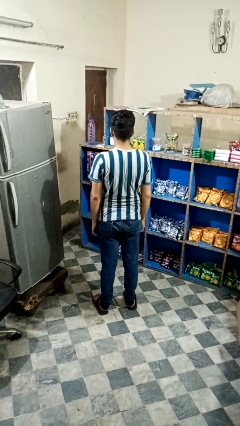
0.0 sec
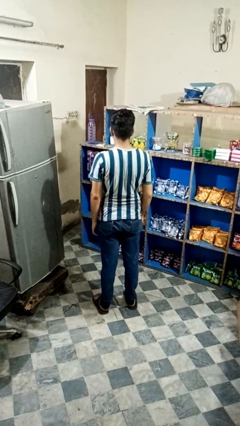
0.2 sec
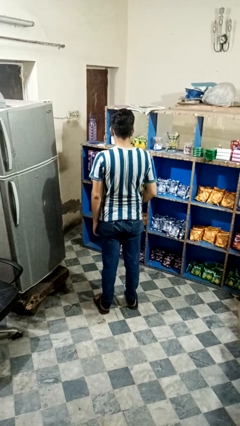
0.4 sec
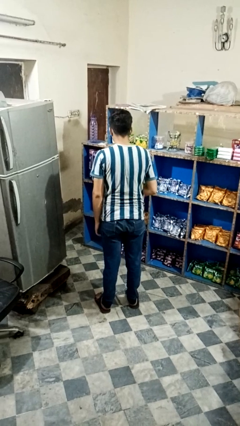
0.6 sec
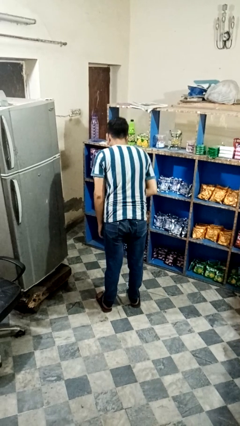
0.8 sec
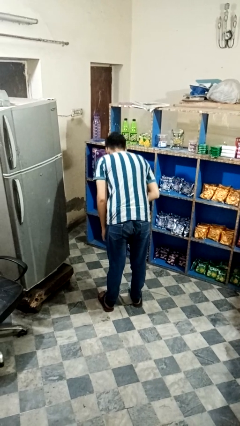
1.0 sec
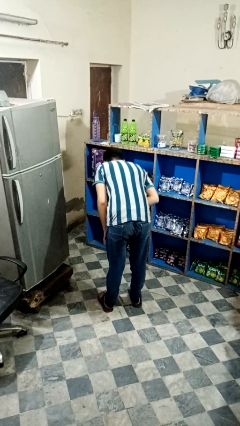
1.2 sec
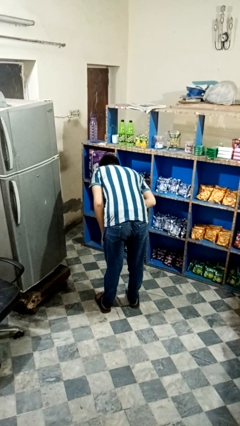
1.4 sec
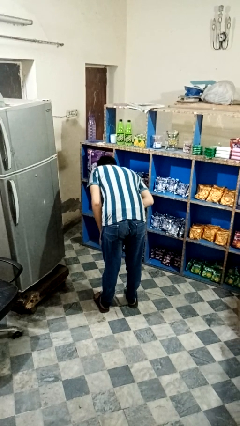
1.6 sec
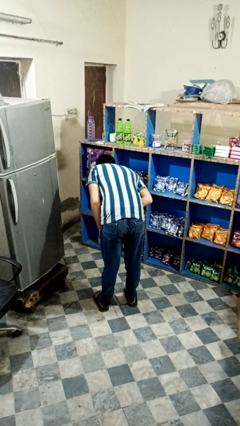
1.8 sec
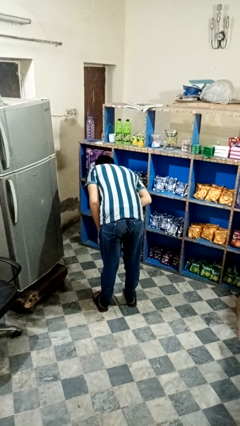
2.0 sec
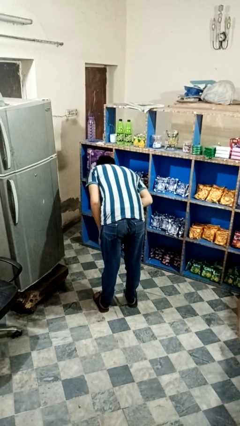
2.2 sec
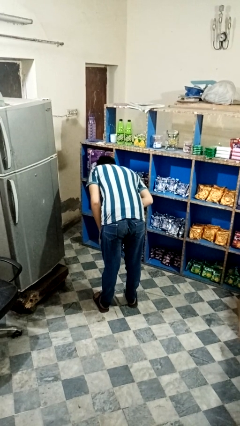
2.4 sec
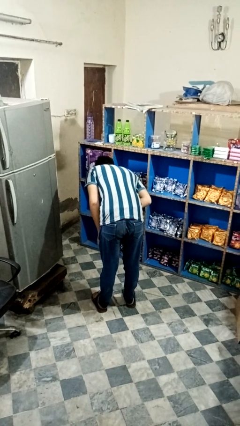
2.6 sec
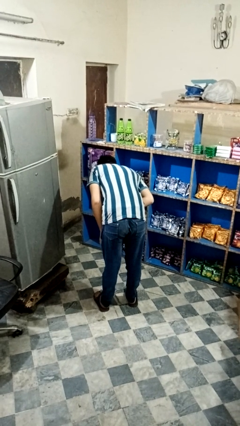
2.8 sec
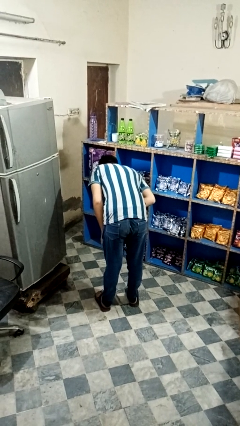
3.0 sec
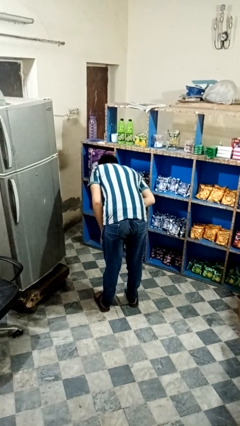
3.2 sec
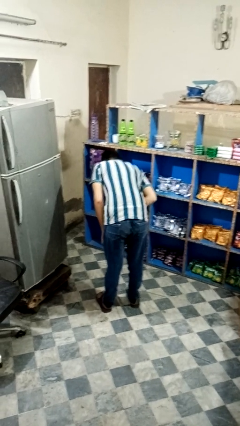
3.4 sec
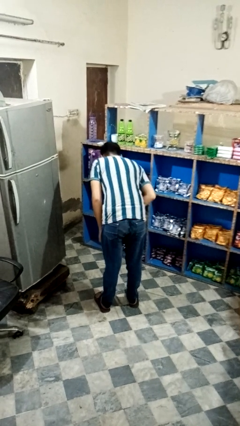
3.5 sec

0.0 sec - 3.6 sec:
person bows

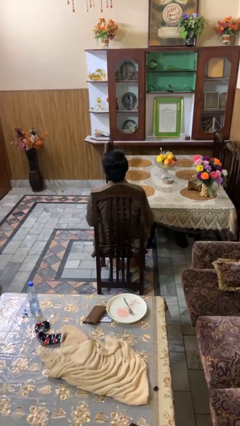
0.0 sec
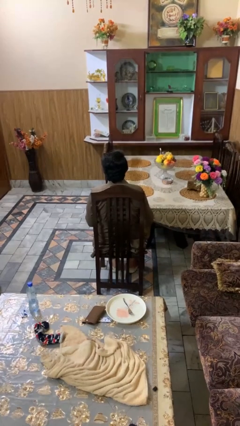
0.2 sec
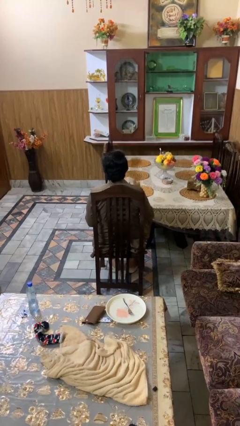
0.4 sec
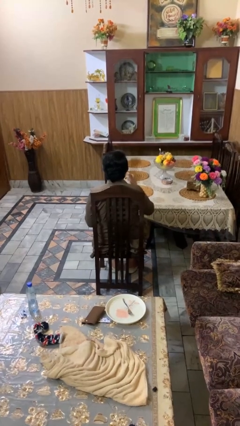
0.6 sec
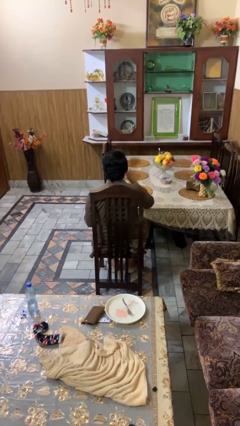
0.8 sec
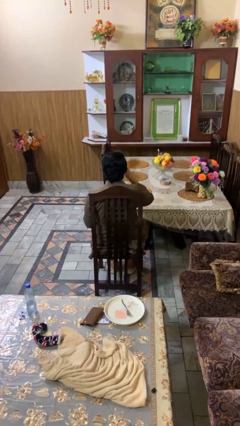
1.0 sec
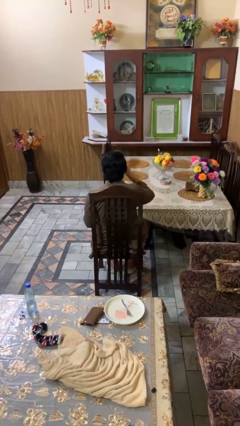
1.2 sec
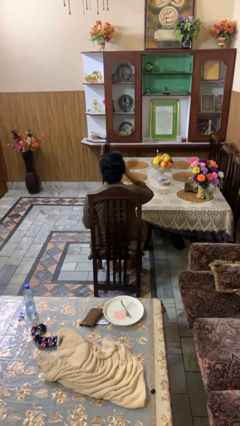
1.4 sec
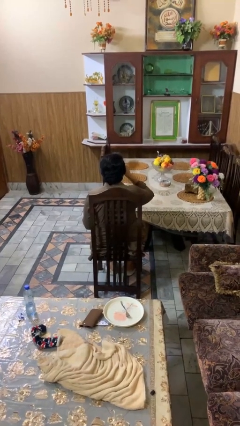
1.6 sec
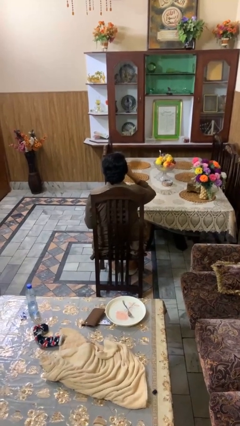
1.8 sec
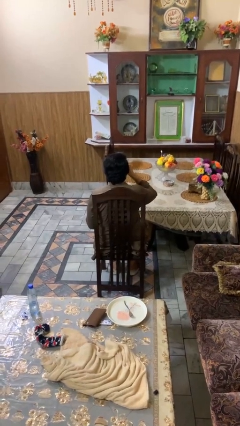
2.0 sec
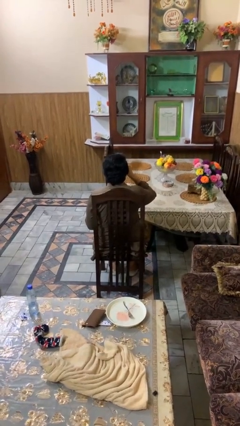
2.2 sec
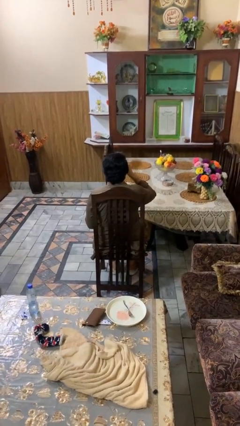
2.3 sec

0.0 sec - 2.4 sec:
person drinks from mug

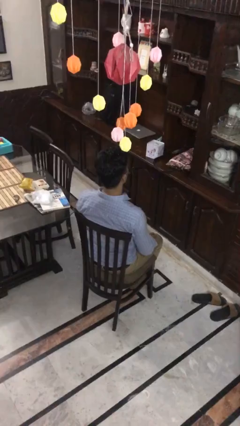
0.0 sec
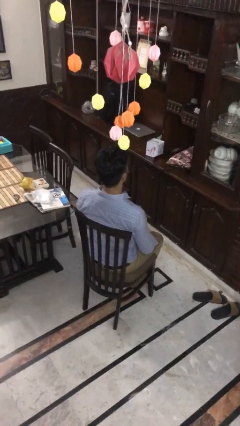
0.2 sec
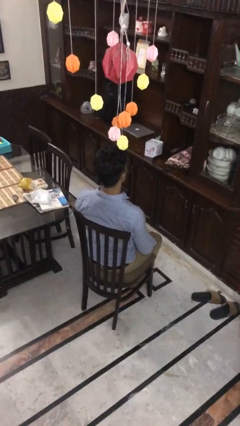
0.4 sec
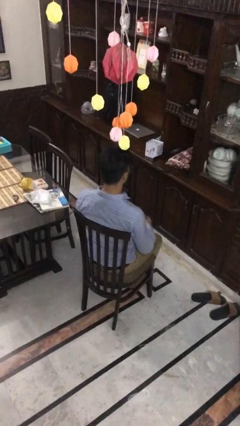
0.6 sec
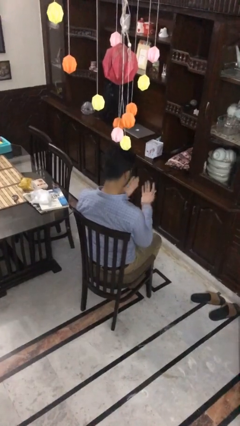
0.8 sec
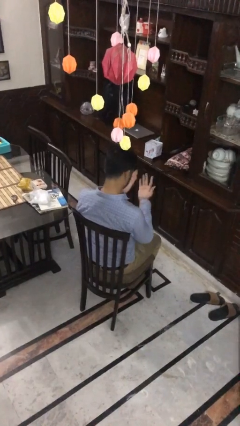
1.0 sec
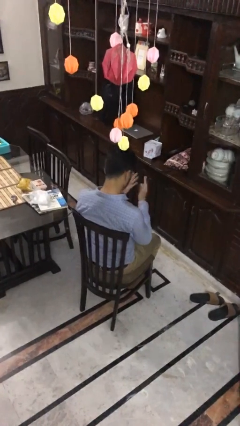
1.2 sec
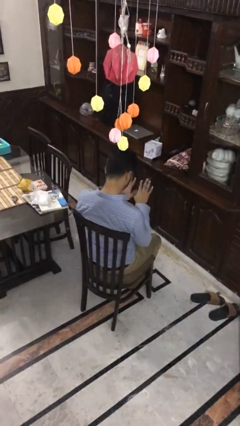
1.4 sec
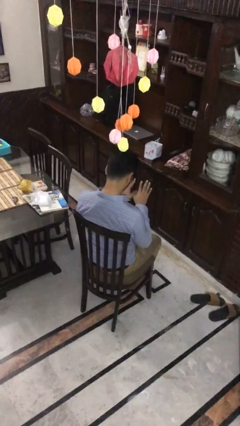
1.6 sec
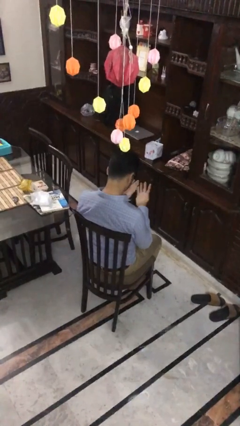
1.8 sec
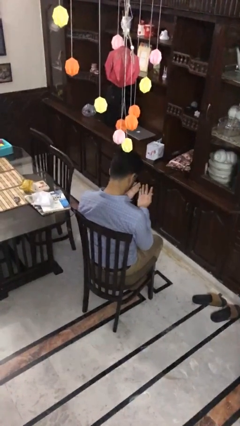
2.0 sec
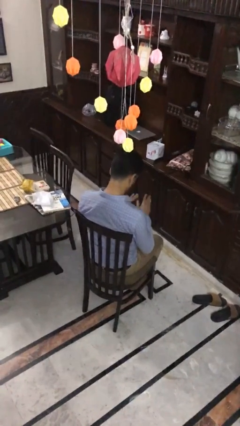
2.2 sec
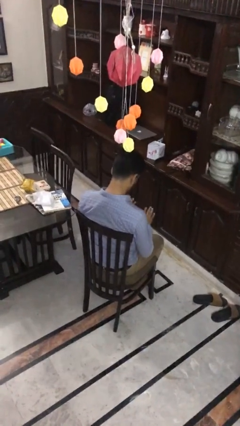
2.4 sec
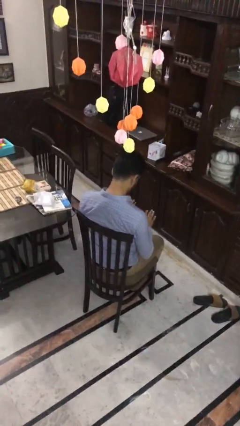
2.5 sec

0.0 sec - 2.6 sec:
person looks at hands in lap

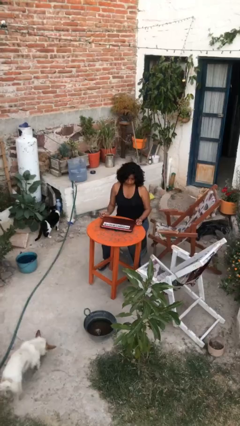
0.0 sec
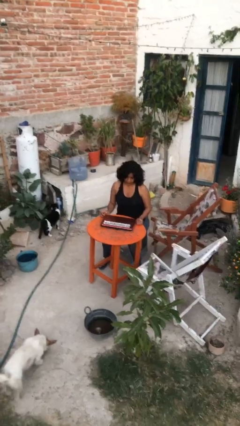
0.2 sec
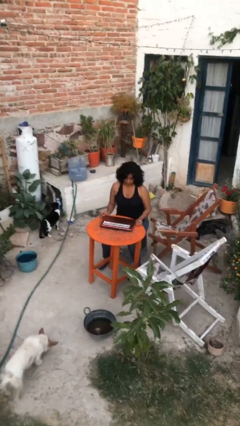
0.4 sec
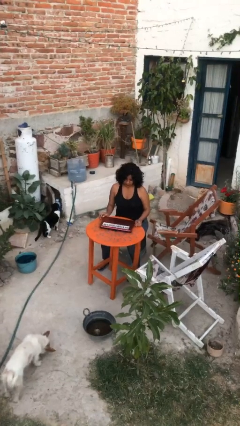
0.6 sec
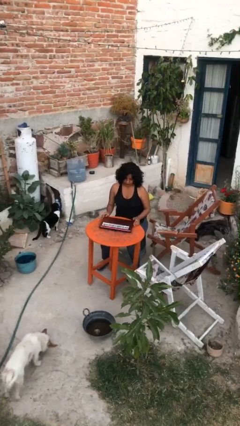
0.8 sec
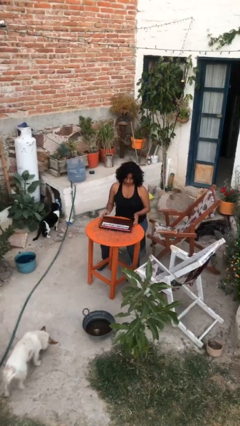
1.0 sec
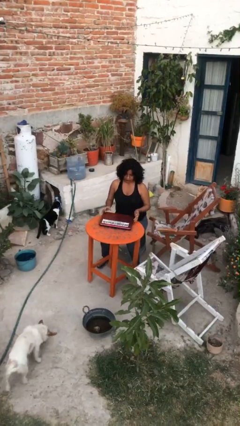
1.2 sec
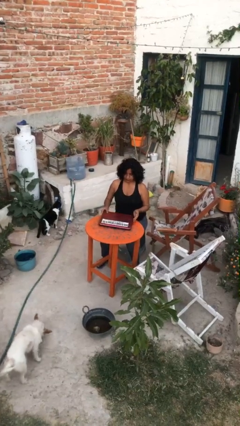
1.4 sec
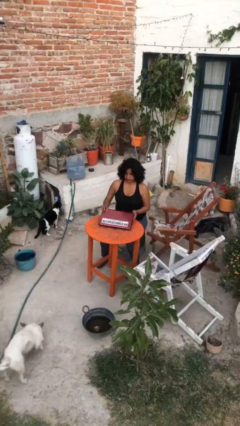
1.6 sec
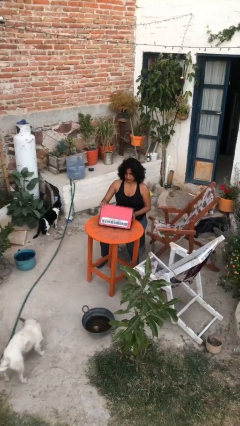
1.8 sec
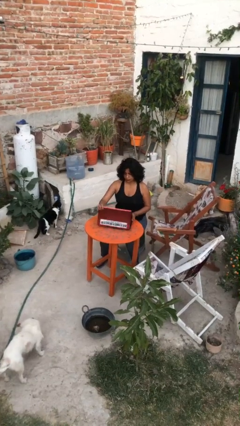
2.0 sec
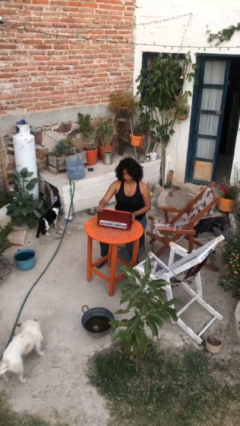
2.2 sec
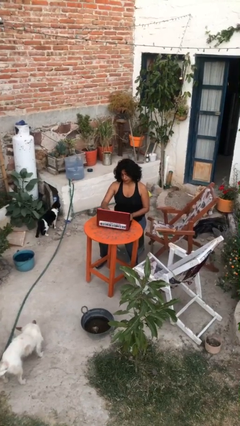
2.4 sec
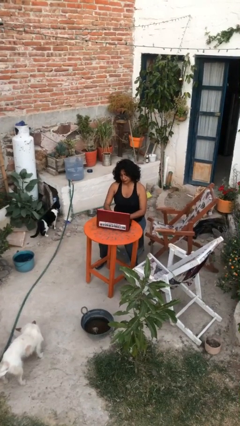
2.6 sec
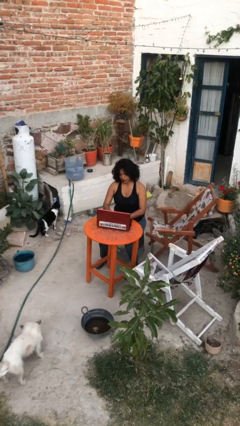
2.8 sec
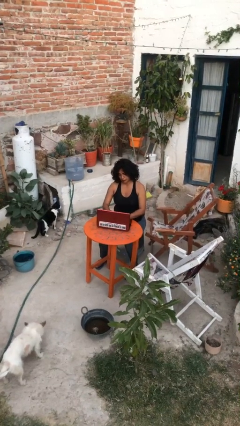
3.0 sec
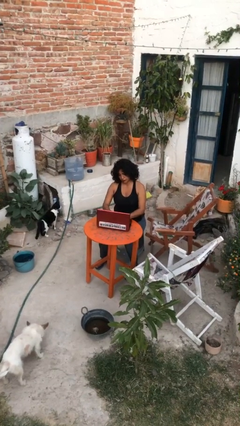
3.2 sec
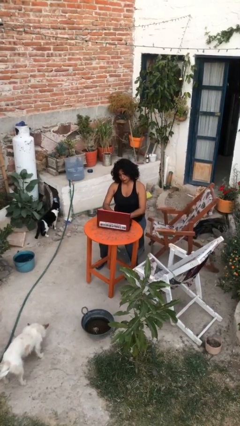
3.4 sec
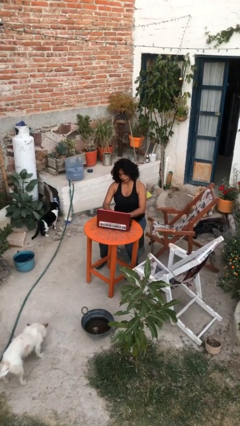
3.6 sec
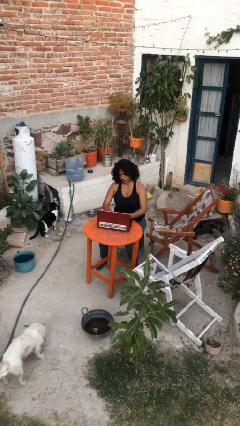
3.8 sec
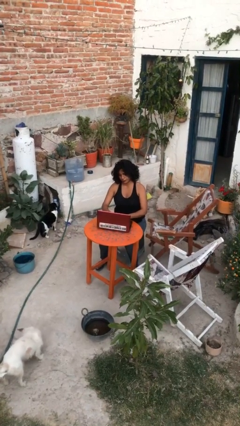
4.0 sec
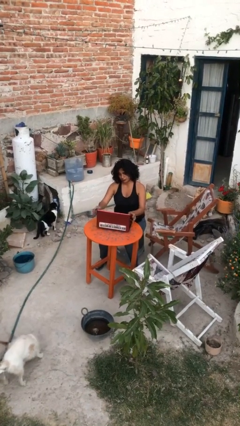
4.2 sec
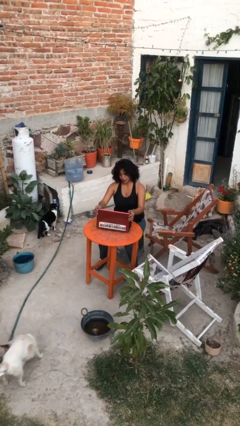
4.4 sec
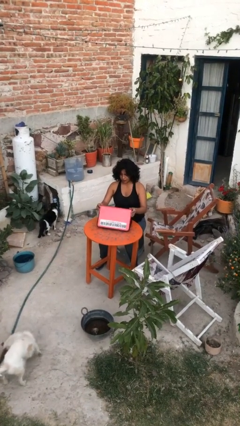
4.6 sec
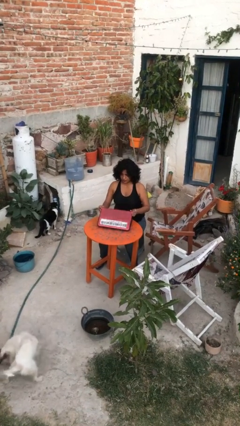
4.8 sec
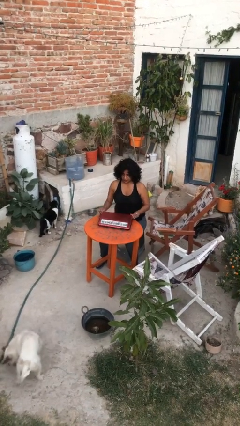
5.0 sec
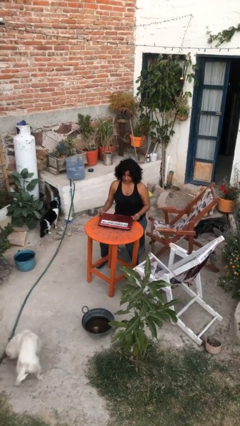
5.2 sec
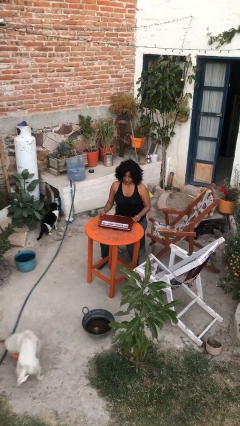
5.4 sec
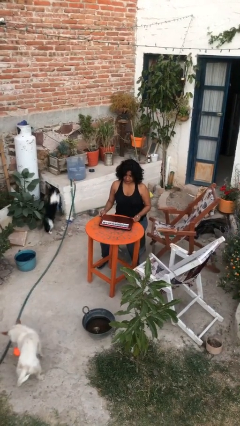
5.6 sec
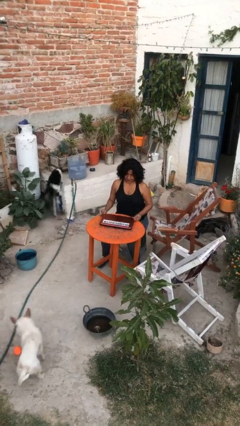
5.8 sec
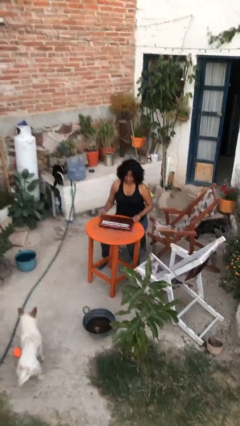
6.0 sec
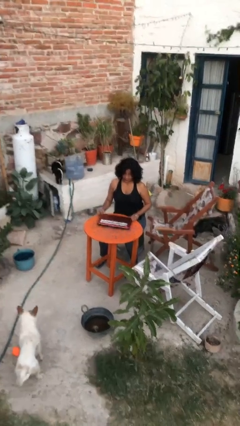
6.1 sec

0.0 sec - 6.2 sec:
person interacts with laptop

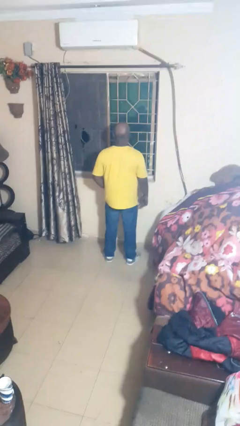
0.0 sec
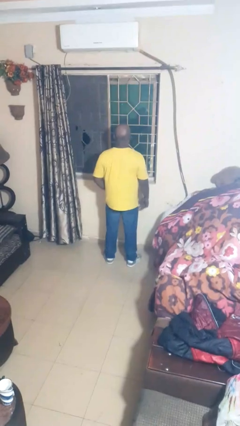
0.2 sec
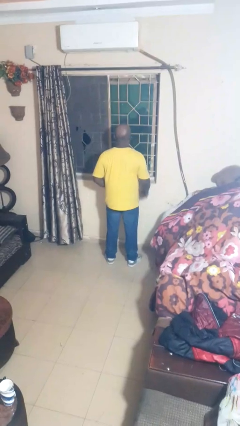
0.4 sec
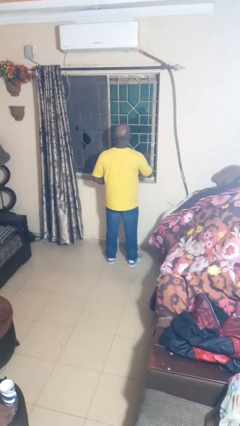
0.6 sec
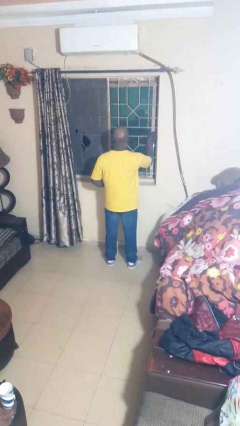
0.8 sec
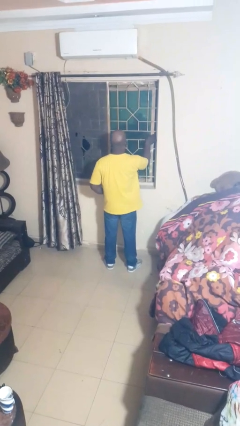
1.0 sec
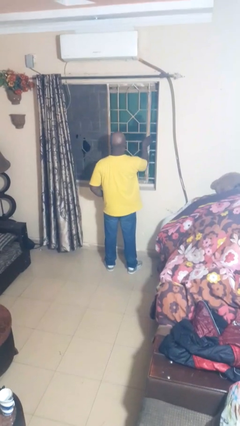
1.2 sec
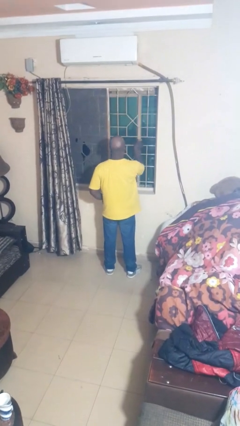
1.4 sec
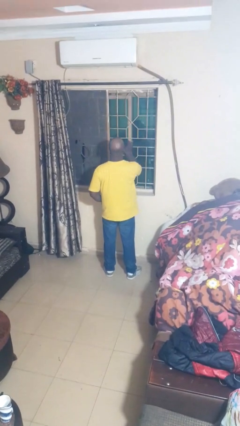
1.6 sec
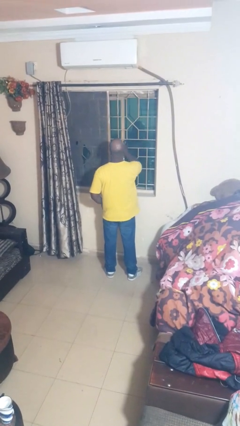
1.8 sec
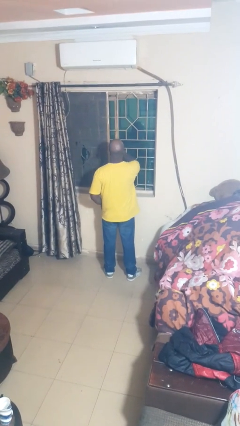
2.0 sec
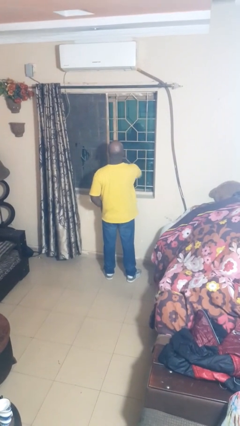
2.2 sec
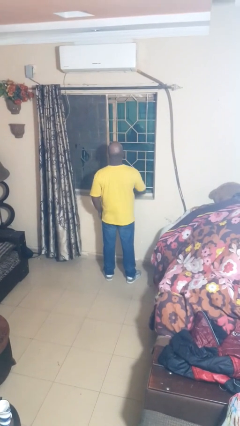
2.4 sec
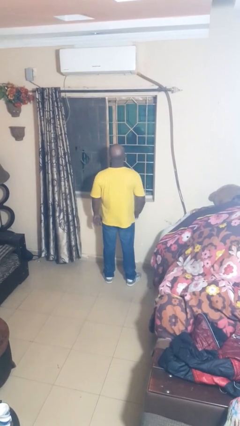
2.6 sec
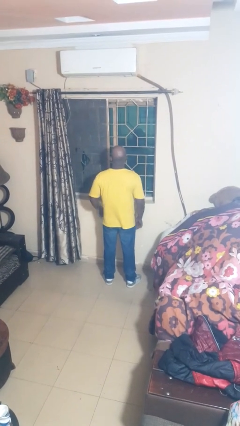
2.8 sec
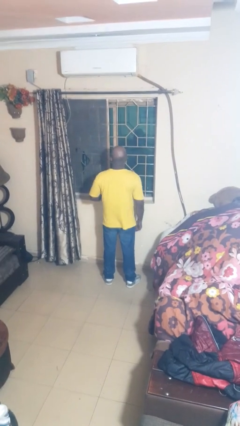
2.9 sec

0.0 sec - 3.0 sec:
person opens home window
